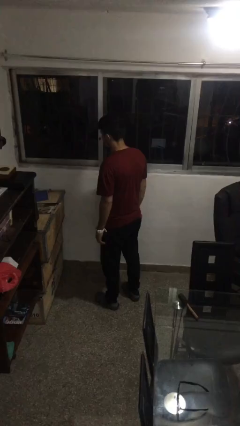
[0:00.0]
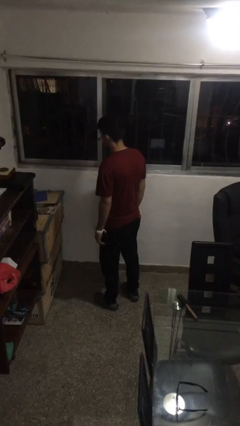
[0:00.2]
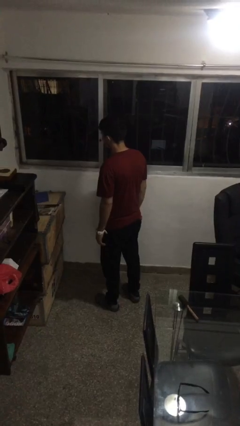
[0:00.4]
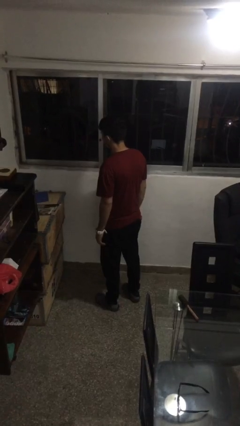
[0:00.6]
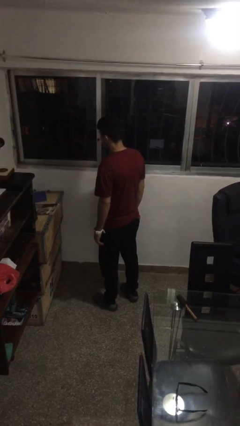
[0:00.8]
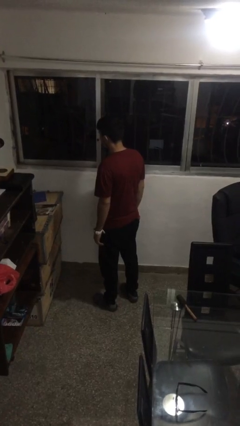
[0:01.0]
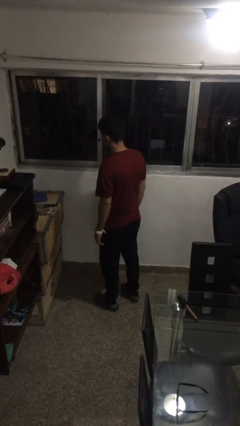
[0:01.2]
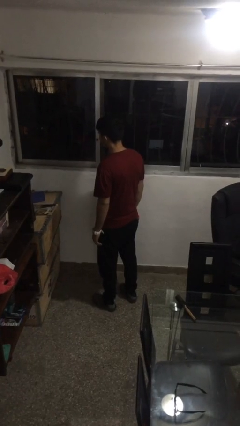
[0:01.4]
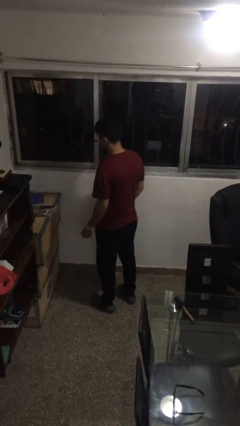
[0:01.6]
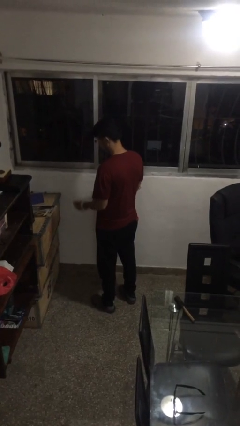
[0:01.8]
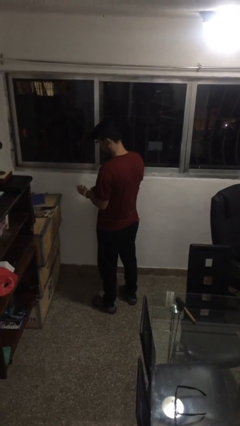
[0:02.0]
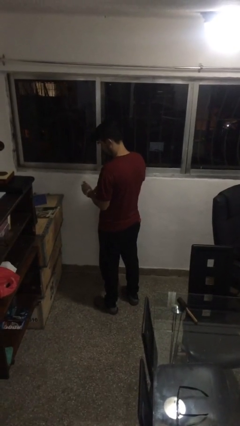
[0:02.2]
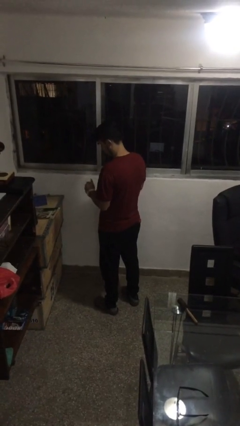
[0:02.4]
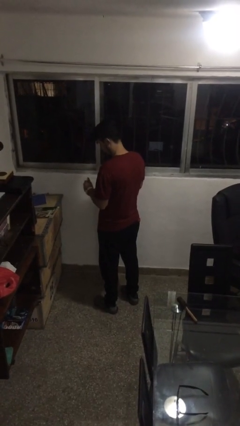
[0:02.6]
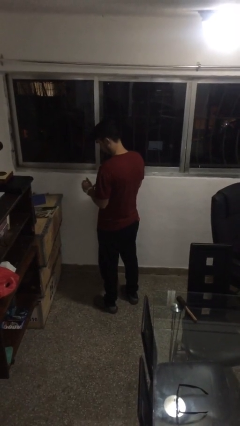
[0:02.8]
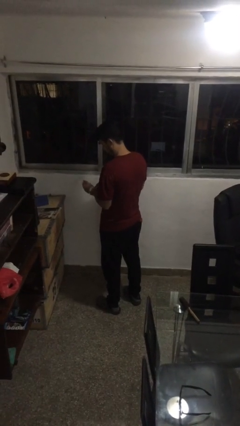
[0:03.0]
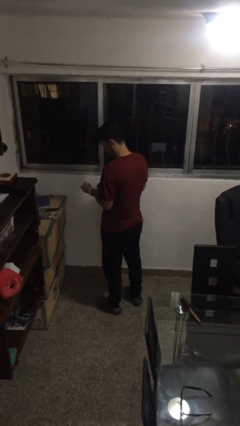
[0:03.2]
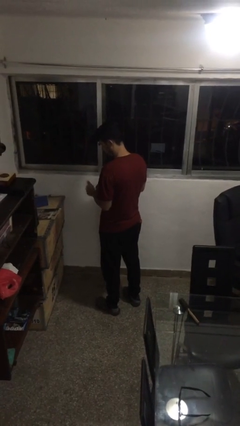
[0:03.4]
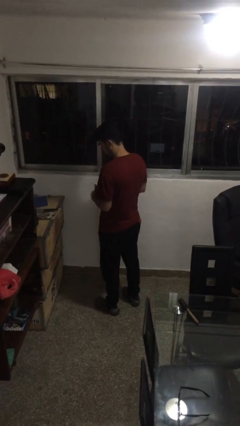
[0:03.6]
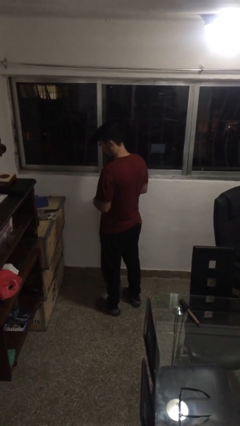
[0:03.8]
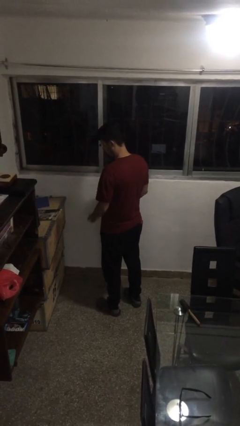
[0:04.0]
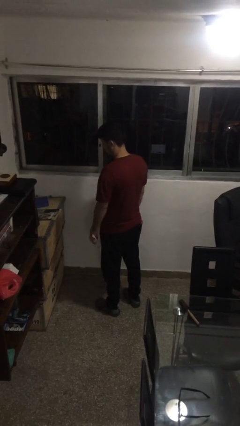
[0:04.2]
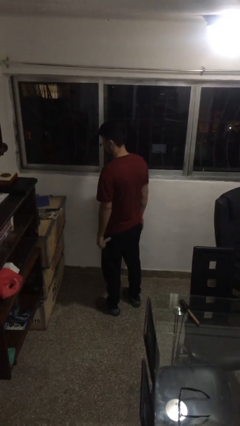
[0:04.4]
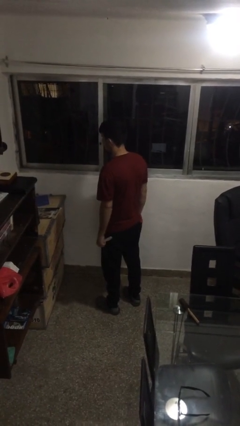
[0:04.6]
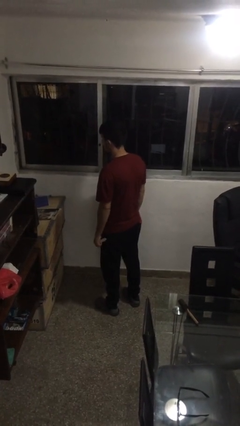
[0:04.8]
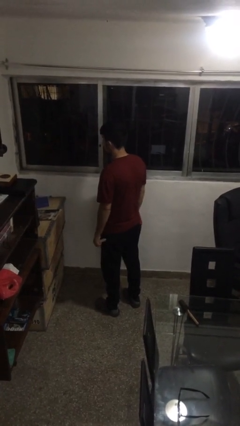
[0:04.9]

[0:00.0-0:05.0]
person takes off wristwatch

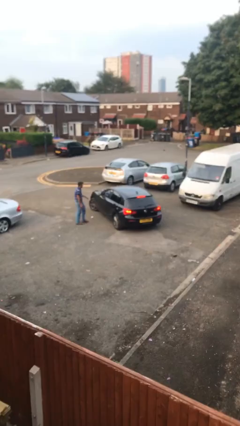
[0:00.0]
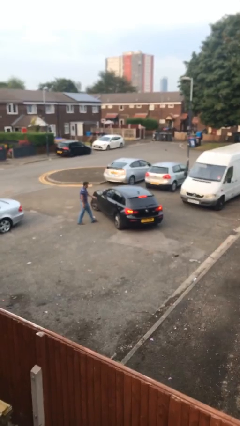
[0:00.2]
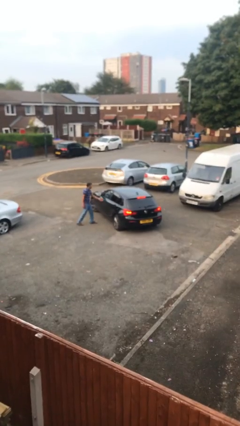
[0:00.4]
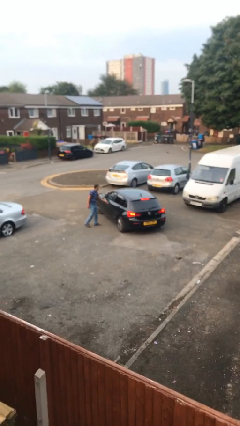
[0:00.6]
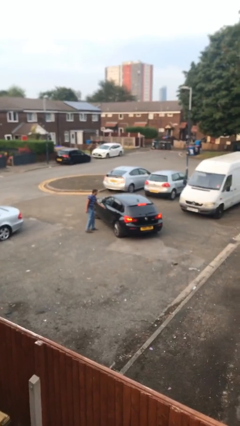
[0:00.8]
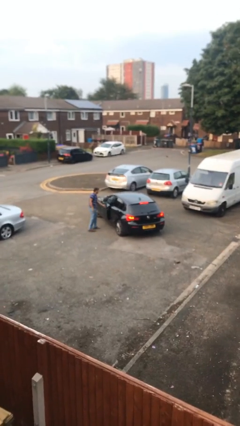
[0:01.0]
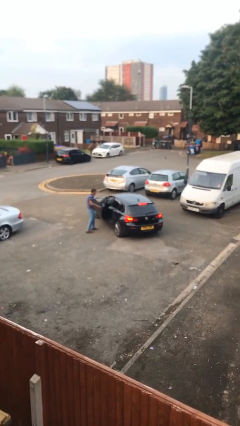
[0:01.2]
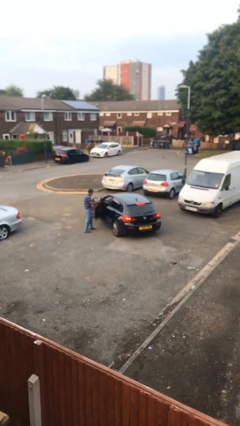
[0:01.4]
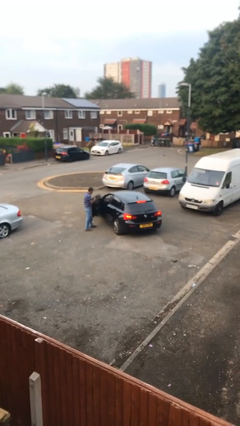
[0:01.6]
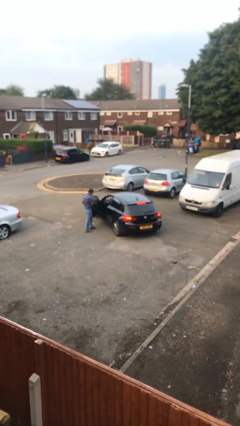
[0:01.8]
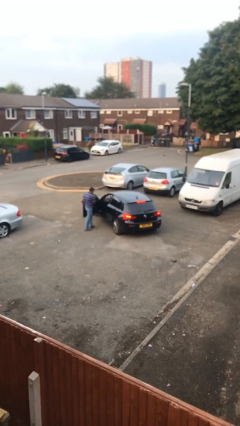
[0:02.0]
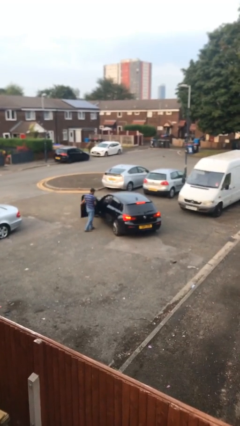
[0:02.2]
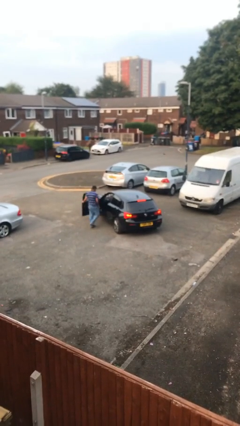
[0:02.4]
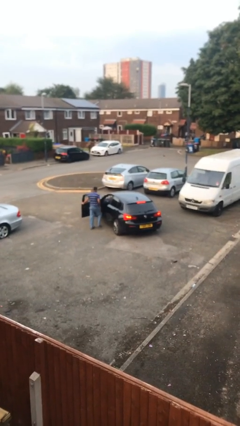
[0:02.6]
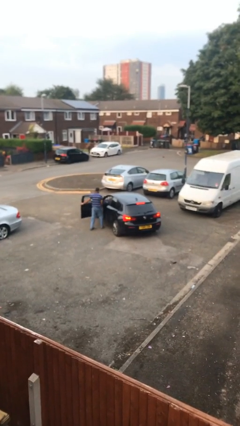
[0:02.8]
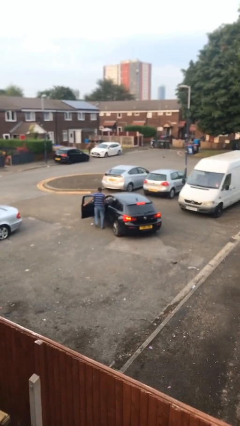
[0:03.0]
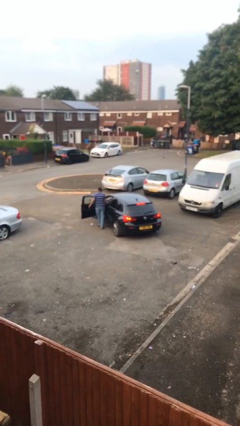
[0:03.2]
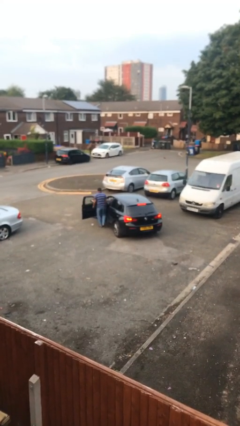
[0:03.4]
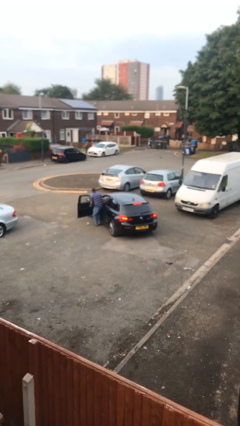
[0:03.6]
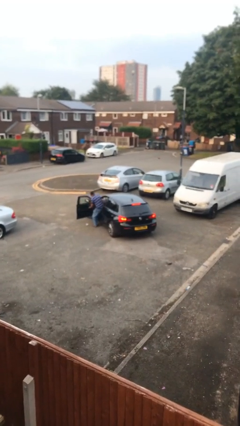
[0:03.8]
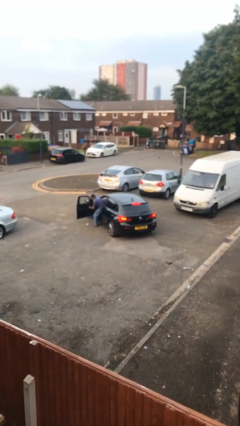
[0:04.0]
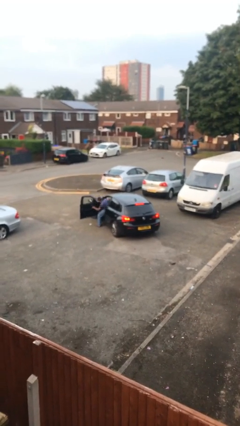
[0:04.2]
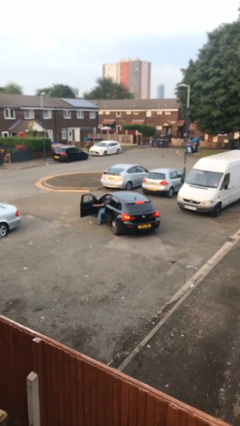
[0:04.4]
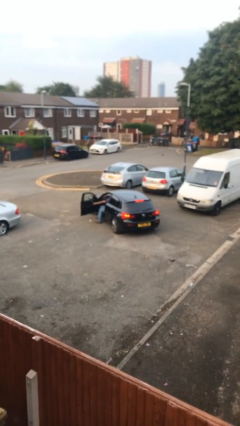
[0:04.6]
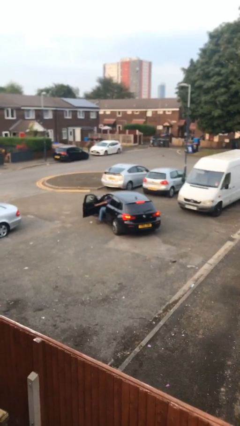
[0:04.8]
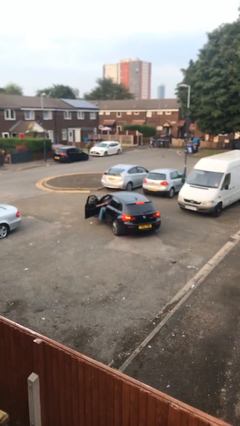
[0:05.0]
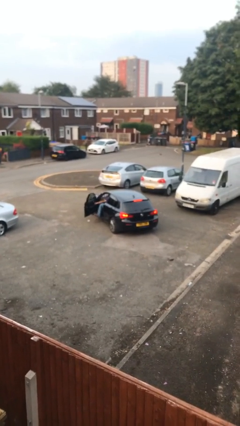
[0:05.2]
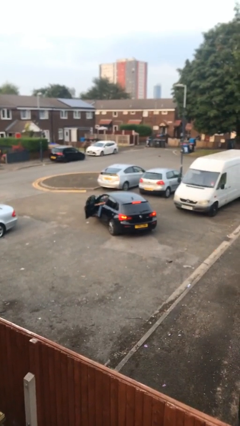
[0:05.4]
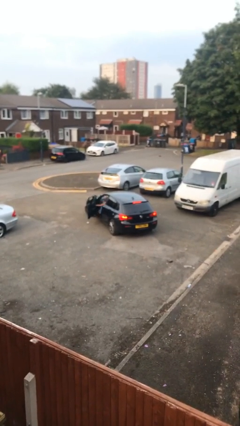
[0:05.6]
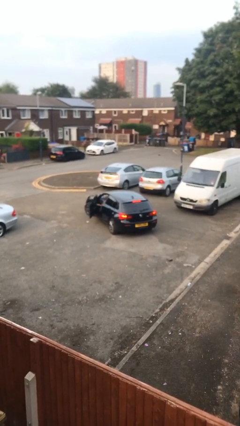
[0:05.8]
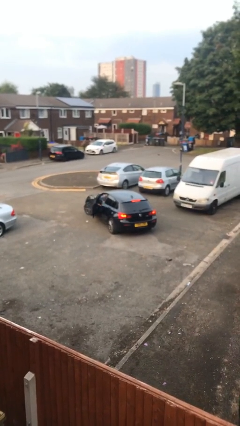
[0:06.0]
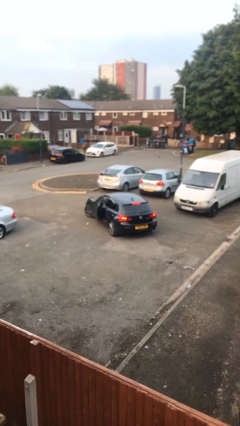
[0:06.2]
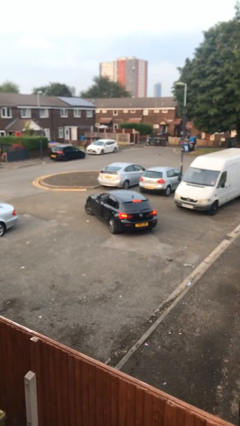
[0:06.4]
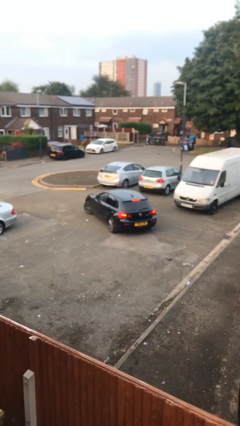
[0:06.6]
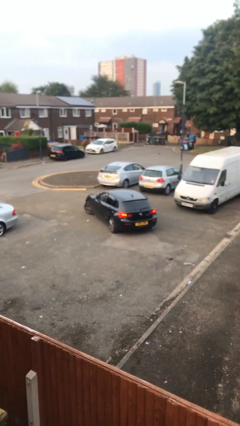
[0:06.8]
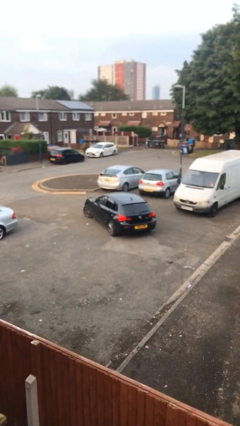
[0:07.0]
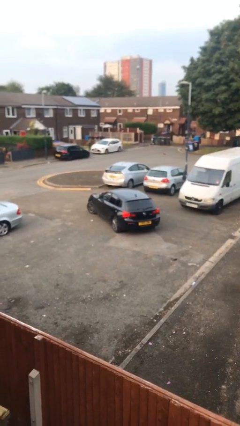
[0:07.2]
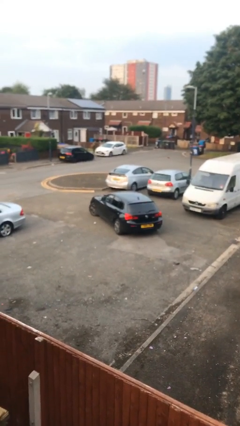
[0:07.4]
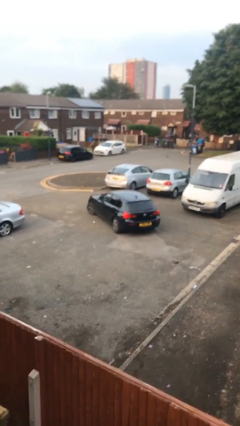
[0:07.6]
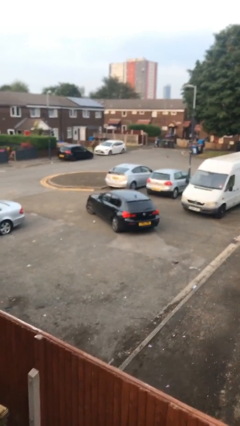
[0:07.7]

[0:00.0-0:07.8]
car picks up person

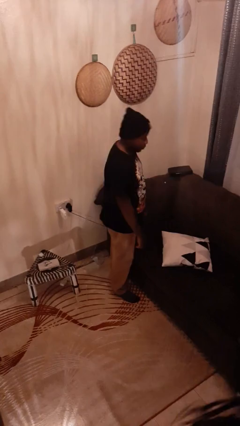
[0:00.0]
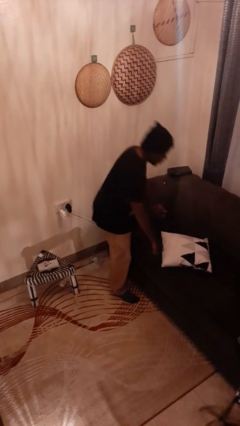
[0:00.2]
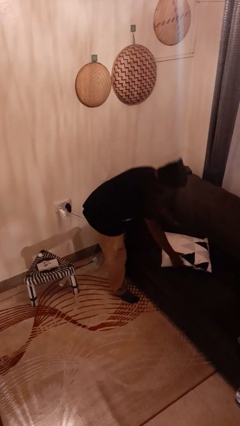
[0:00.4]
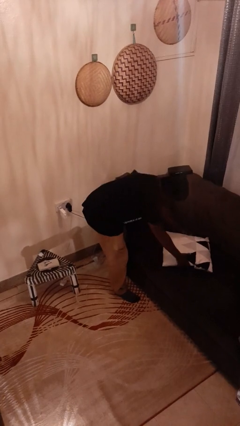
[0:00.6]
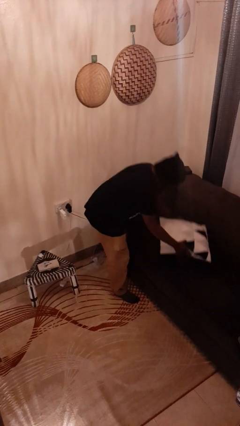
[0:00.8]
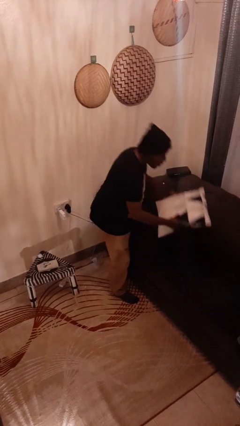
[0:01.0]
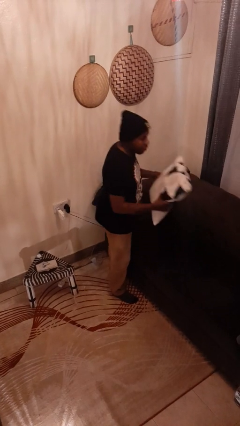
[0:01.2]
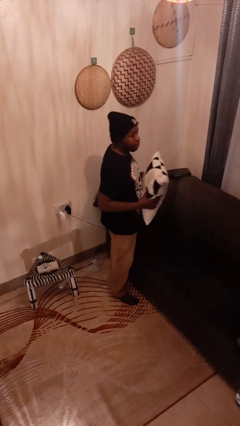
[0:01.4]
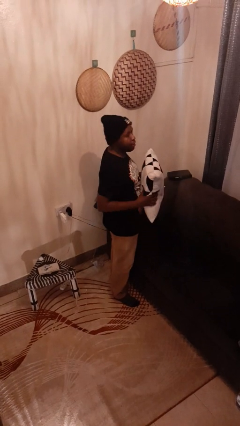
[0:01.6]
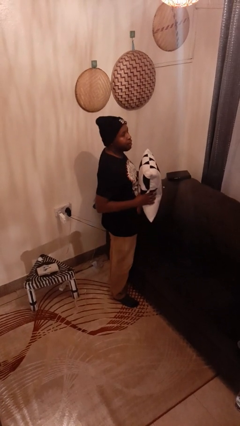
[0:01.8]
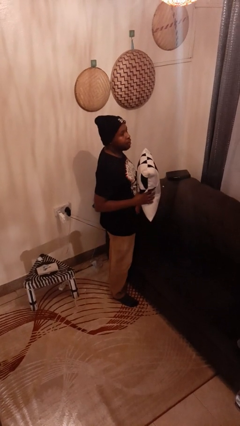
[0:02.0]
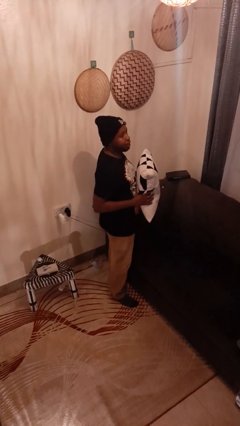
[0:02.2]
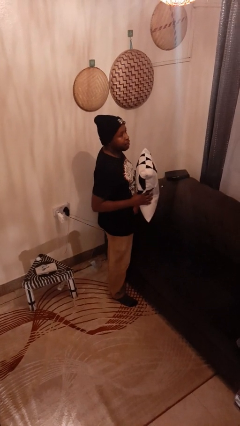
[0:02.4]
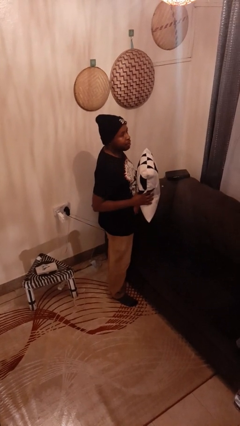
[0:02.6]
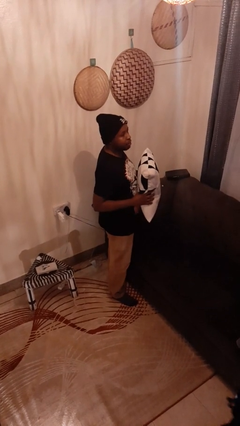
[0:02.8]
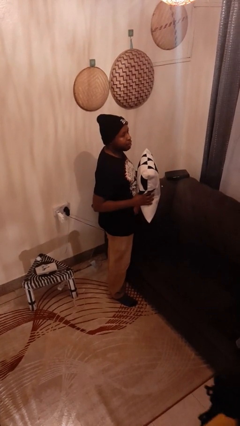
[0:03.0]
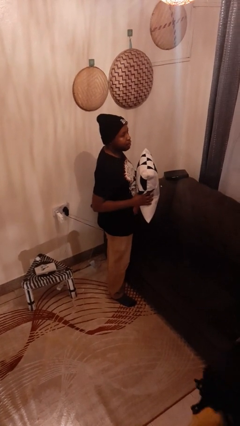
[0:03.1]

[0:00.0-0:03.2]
person picks up object from couch

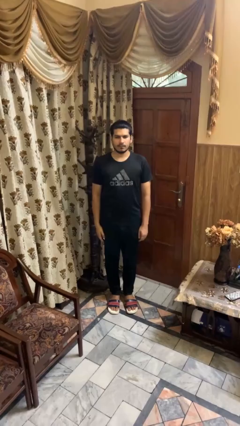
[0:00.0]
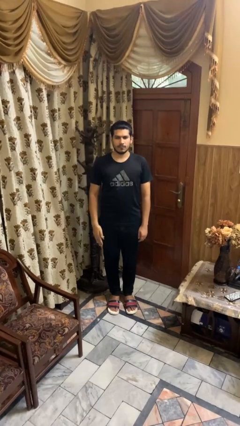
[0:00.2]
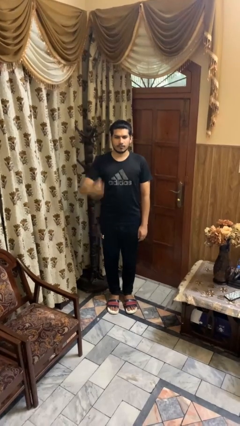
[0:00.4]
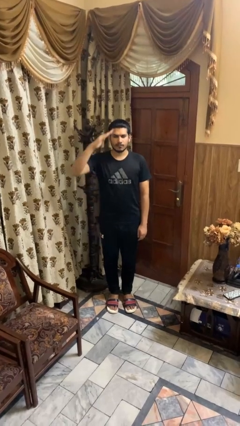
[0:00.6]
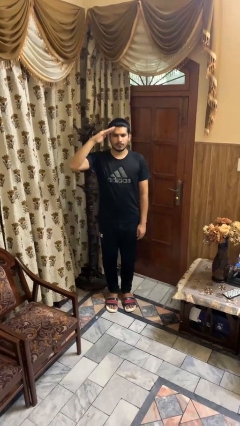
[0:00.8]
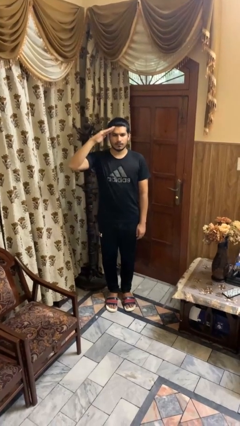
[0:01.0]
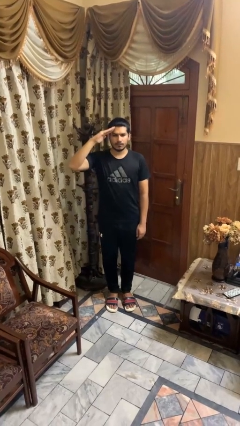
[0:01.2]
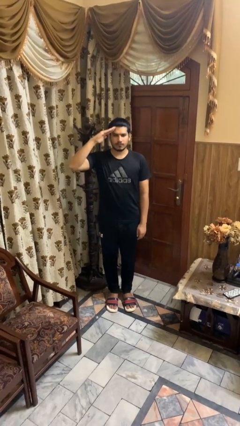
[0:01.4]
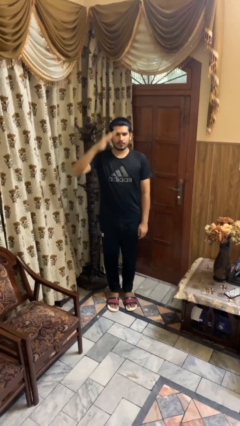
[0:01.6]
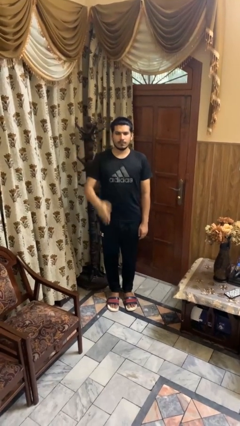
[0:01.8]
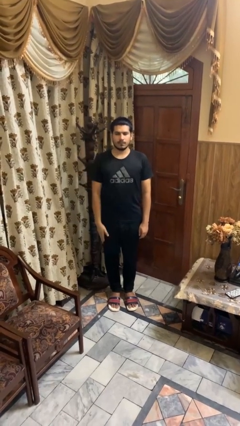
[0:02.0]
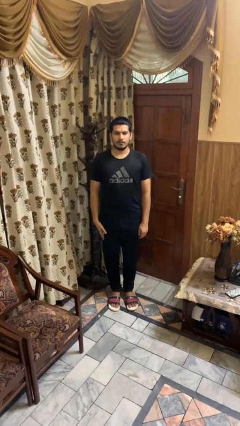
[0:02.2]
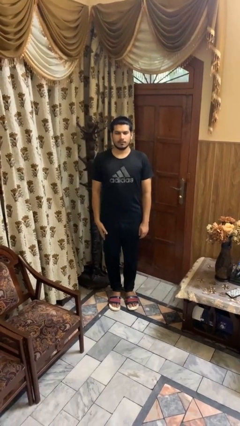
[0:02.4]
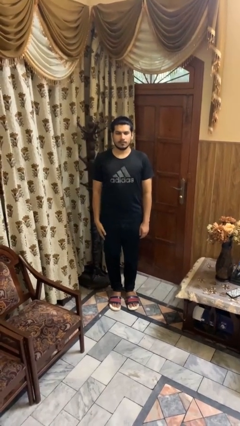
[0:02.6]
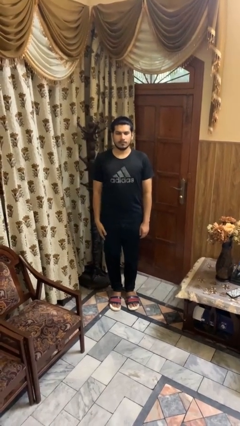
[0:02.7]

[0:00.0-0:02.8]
person salutes
